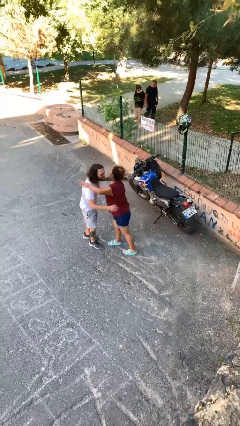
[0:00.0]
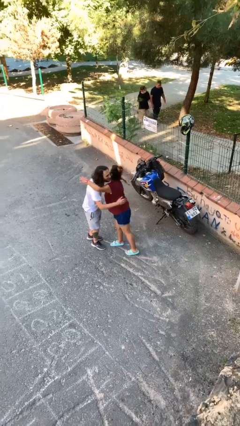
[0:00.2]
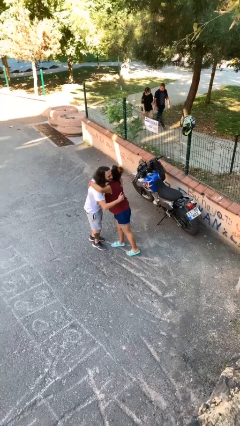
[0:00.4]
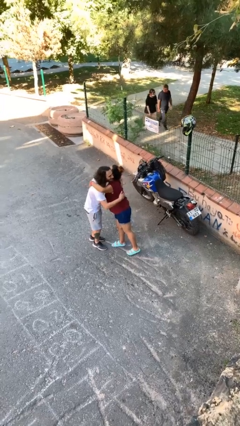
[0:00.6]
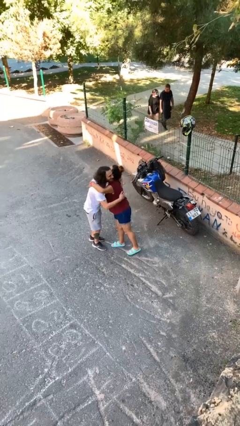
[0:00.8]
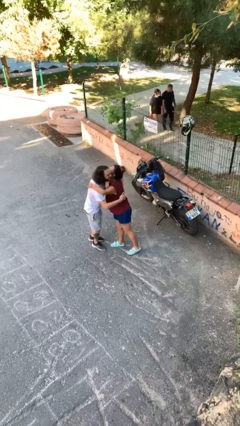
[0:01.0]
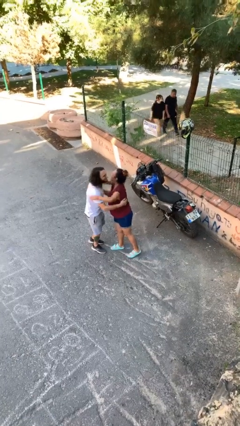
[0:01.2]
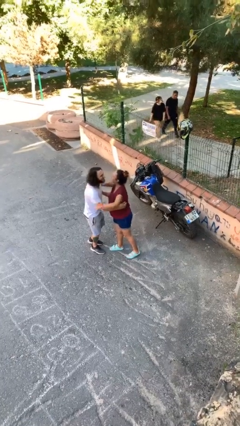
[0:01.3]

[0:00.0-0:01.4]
person embraces person

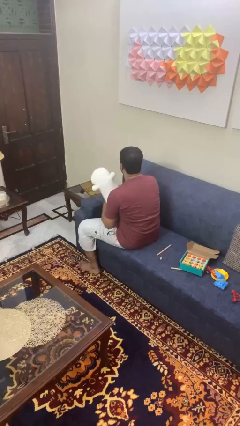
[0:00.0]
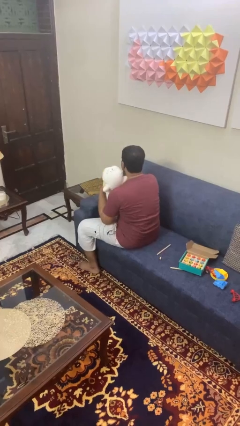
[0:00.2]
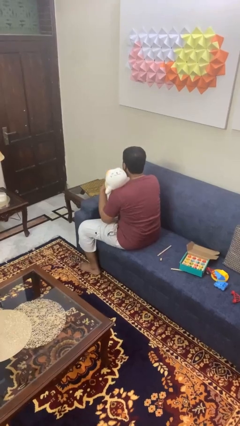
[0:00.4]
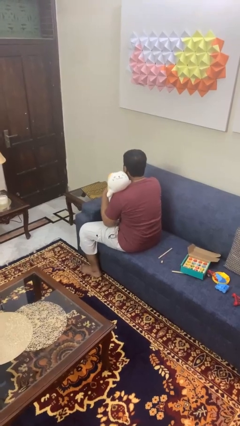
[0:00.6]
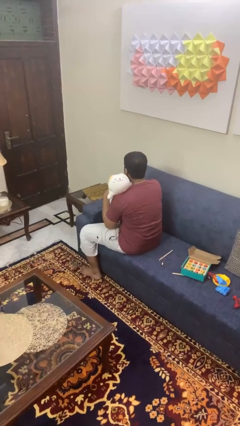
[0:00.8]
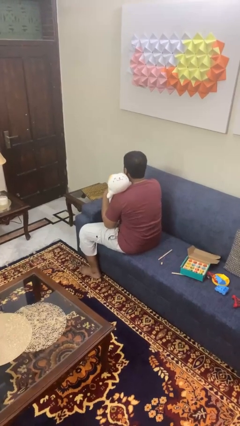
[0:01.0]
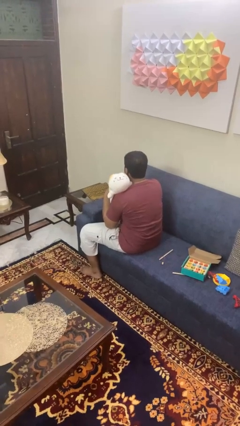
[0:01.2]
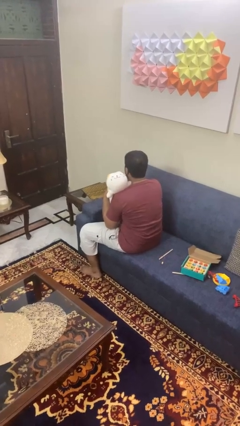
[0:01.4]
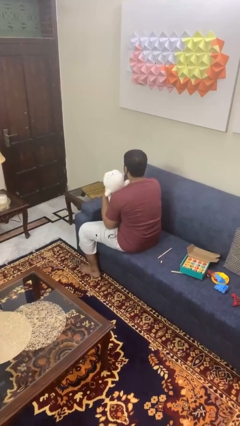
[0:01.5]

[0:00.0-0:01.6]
person hugs stuffed animal

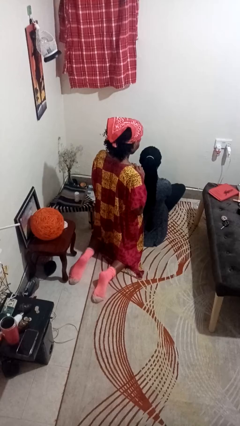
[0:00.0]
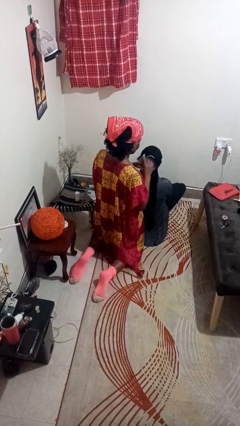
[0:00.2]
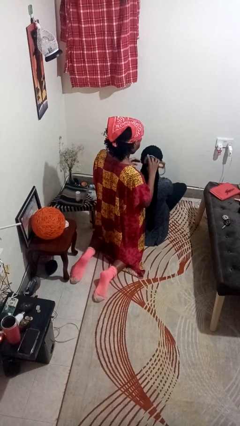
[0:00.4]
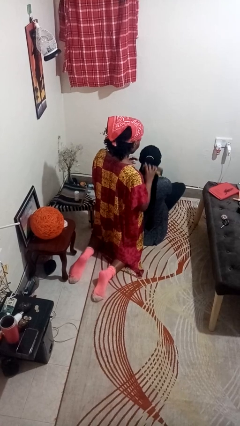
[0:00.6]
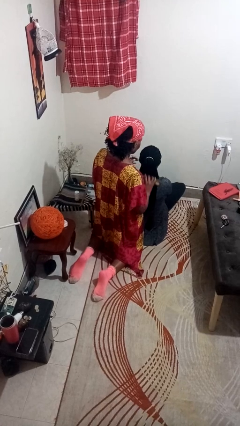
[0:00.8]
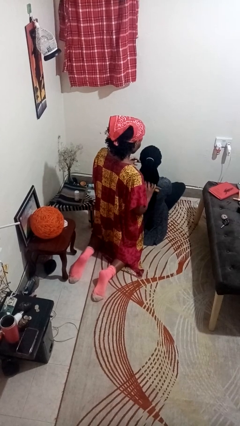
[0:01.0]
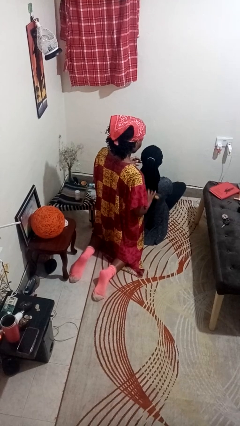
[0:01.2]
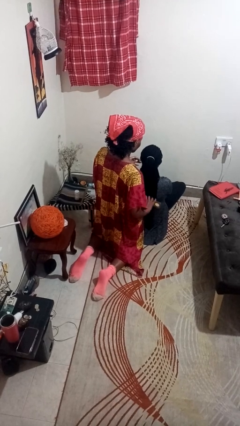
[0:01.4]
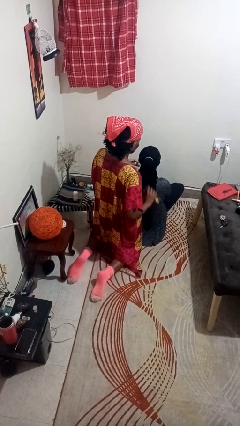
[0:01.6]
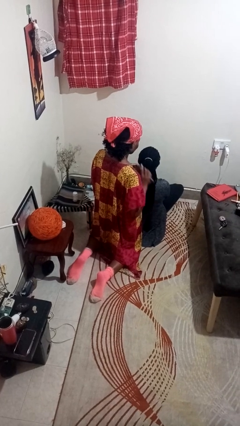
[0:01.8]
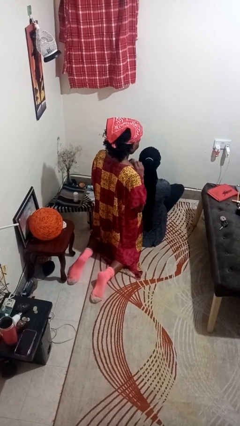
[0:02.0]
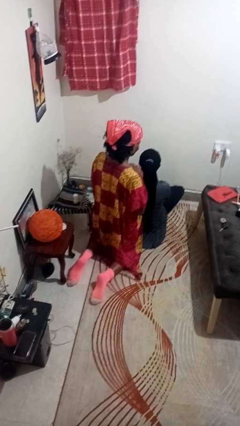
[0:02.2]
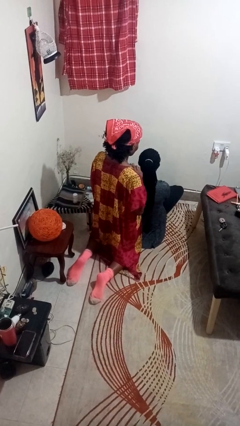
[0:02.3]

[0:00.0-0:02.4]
person brushes hair of person

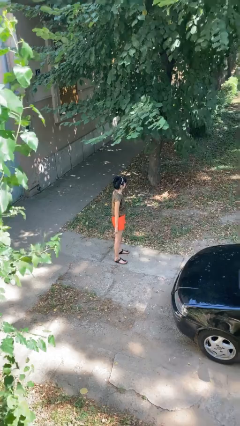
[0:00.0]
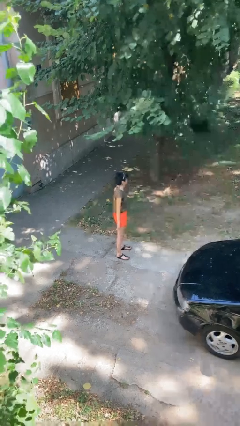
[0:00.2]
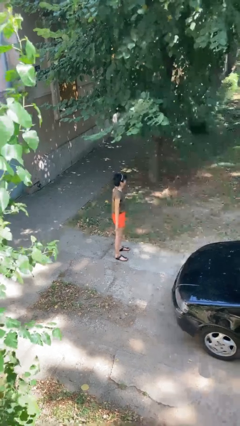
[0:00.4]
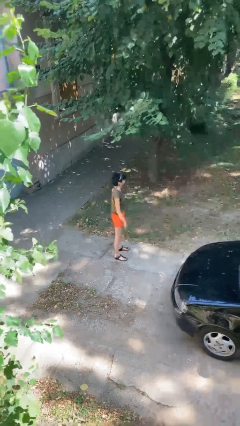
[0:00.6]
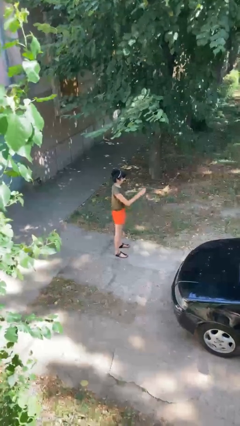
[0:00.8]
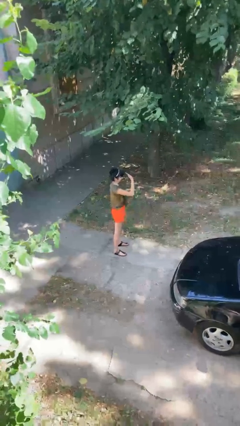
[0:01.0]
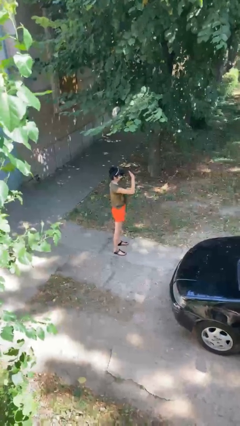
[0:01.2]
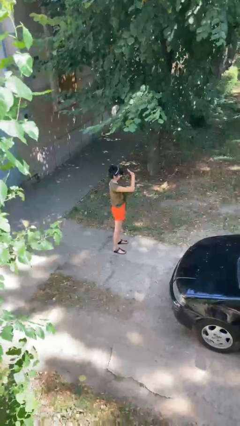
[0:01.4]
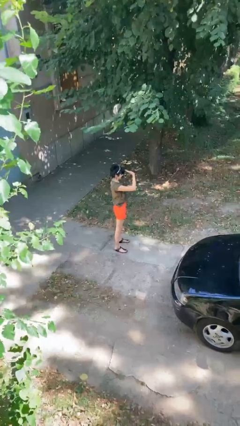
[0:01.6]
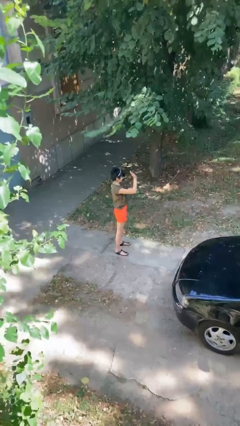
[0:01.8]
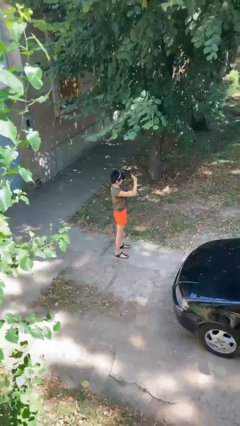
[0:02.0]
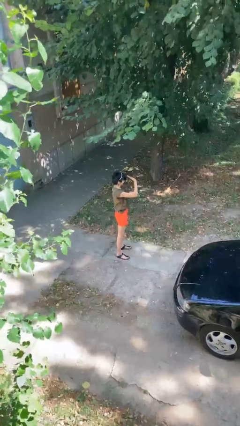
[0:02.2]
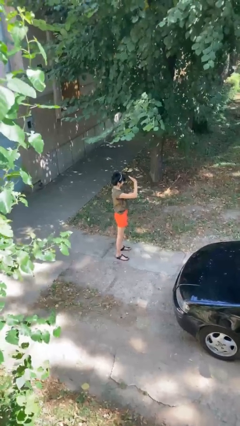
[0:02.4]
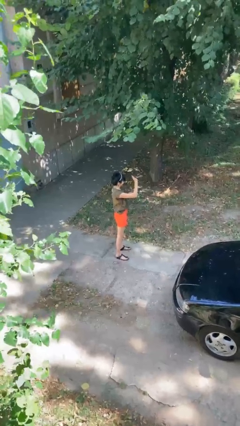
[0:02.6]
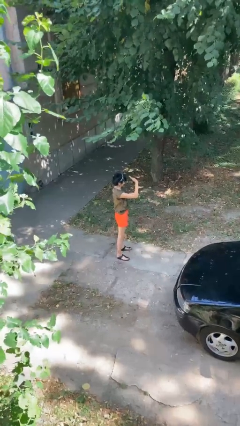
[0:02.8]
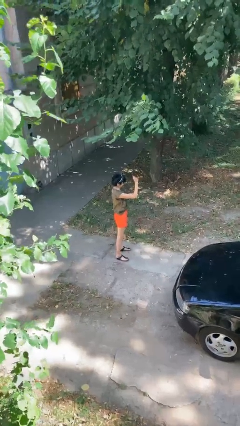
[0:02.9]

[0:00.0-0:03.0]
person waves at person

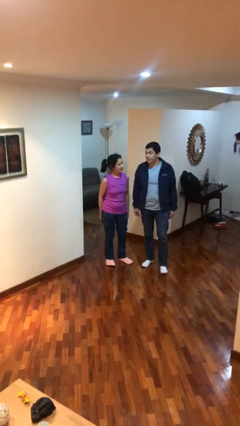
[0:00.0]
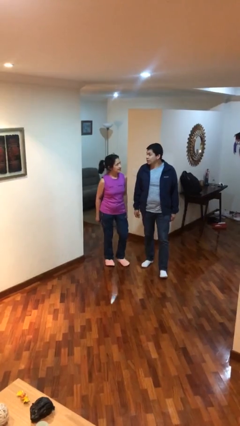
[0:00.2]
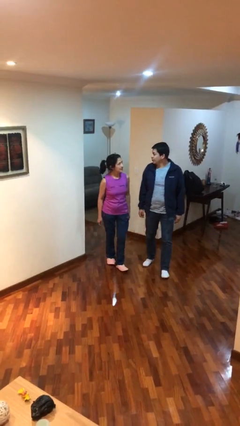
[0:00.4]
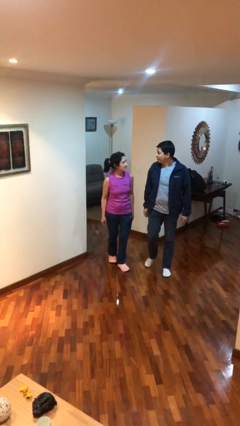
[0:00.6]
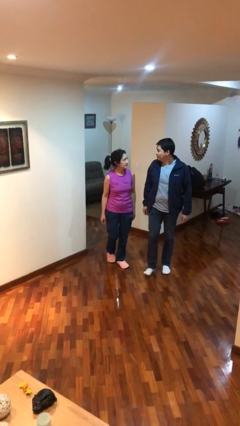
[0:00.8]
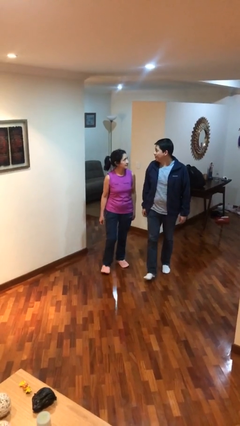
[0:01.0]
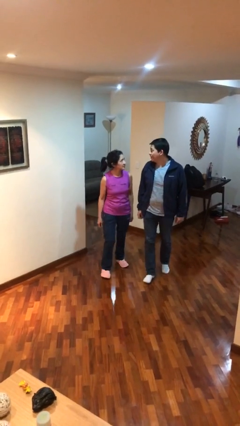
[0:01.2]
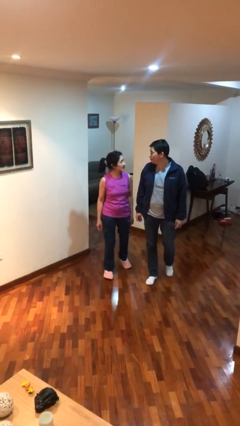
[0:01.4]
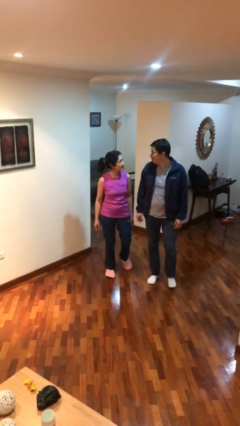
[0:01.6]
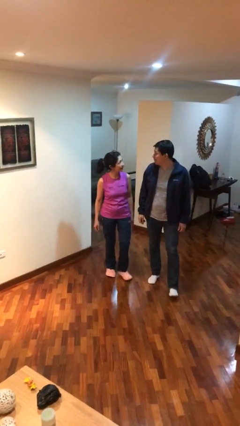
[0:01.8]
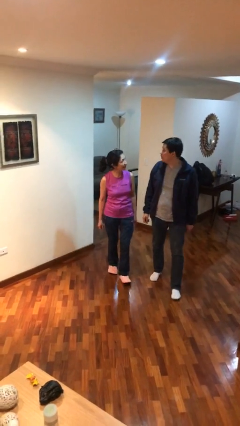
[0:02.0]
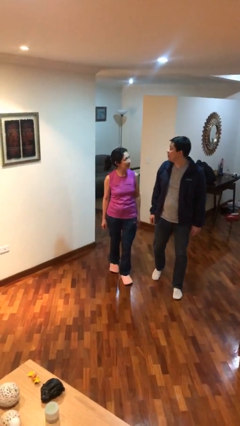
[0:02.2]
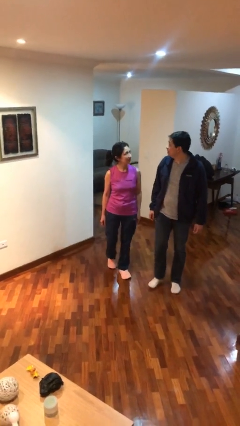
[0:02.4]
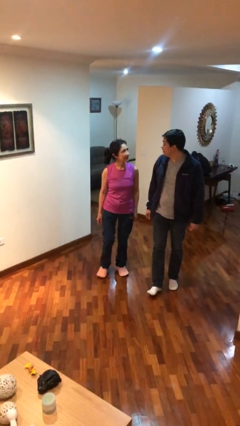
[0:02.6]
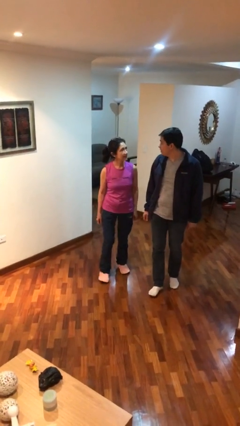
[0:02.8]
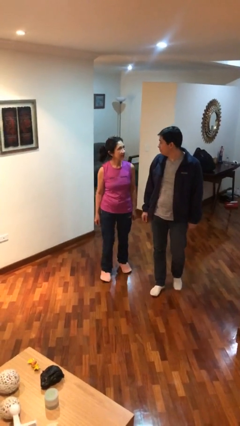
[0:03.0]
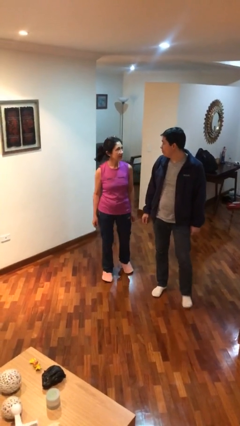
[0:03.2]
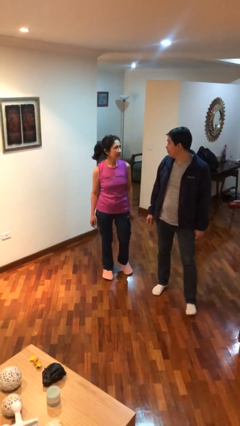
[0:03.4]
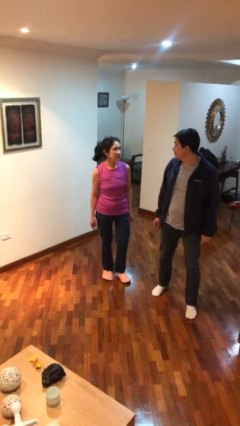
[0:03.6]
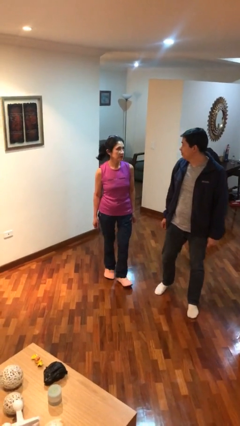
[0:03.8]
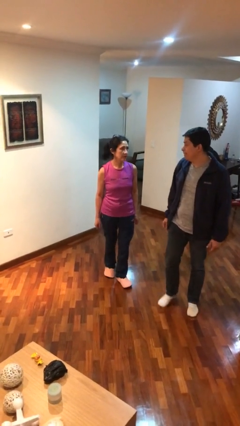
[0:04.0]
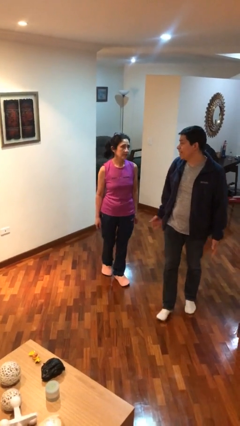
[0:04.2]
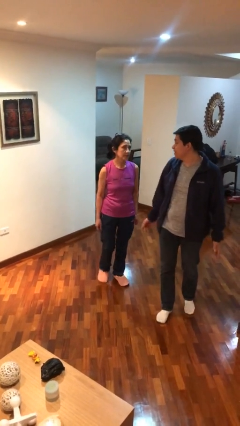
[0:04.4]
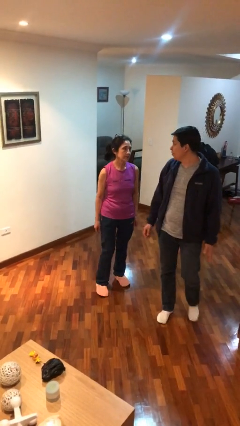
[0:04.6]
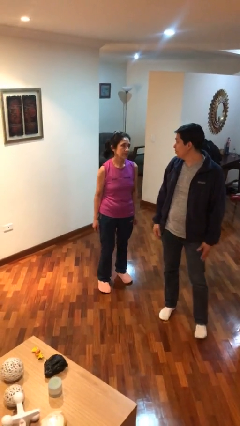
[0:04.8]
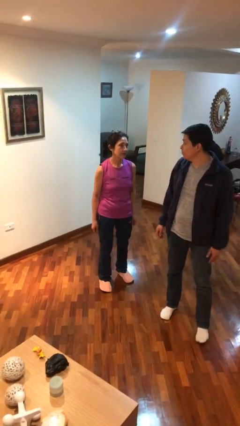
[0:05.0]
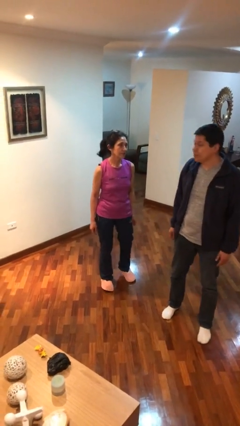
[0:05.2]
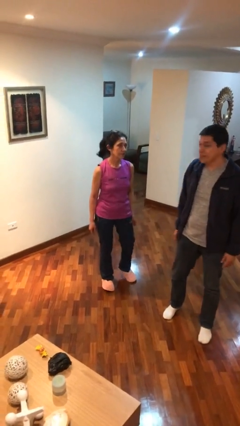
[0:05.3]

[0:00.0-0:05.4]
person talks to person

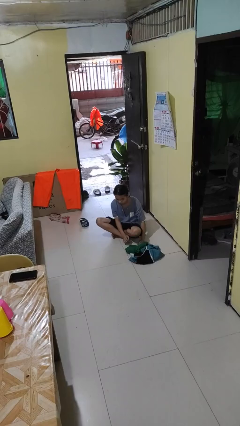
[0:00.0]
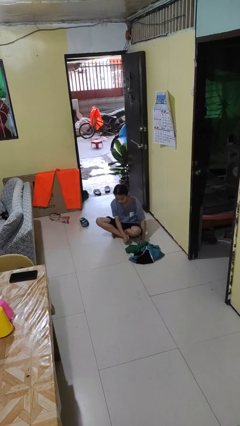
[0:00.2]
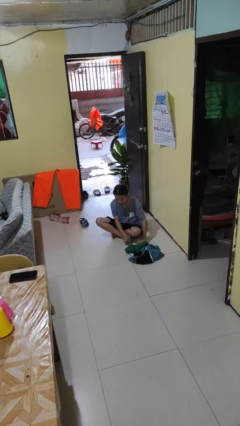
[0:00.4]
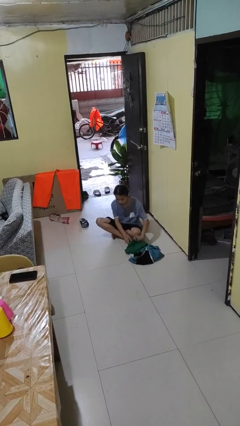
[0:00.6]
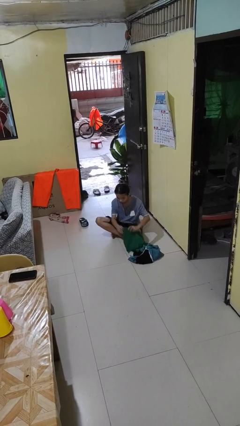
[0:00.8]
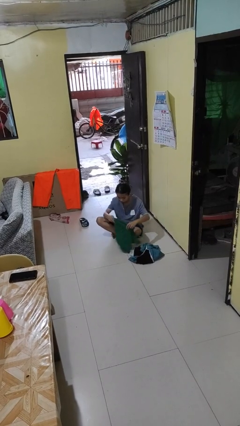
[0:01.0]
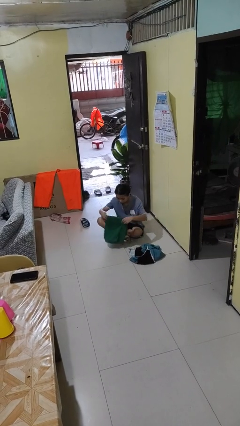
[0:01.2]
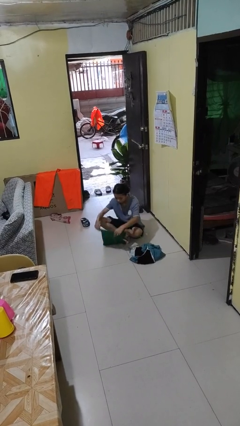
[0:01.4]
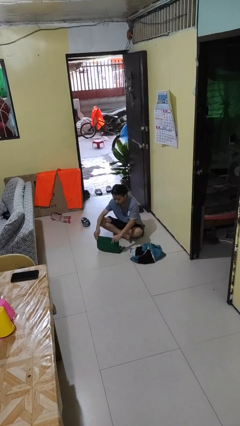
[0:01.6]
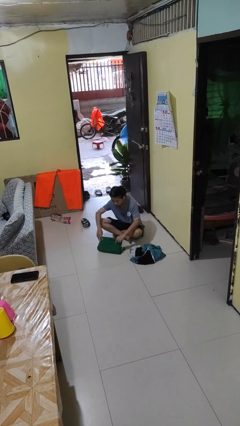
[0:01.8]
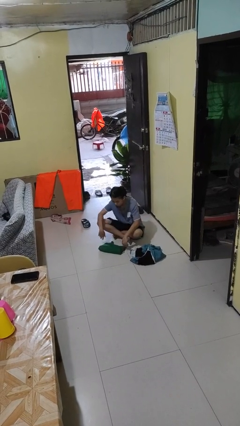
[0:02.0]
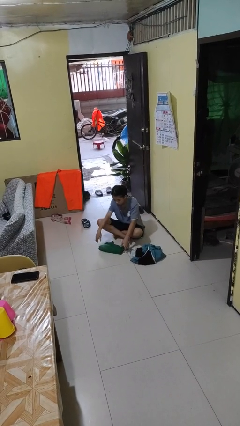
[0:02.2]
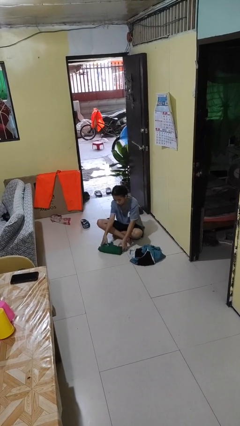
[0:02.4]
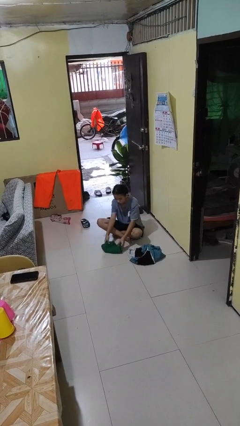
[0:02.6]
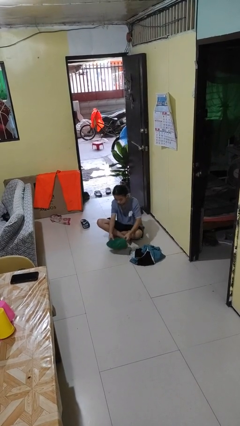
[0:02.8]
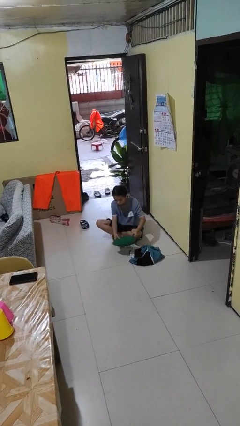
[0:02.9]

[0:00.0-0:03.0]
person folds shirt

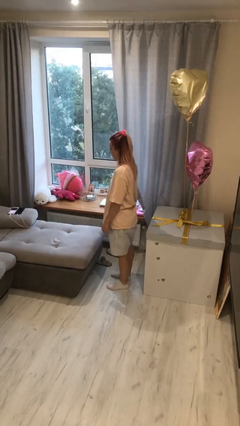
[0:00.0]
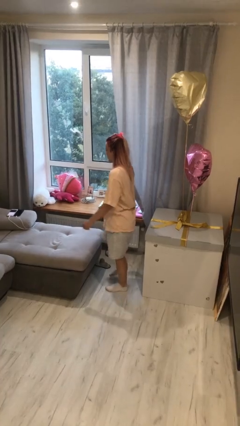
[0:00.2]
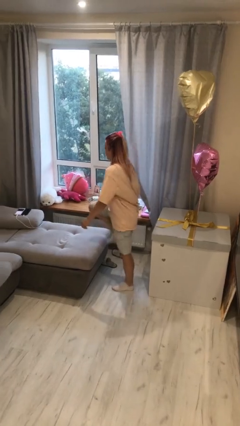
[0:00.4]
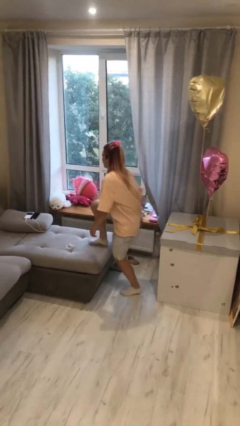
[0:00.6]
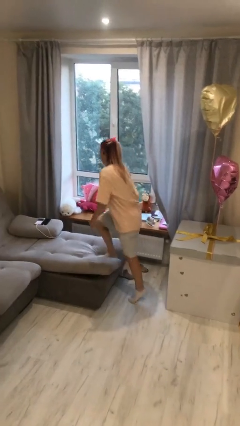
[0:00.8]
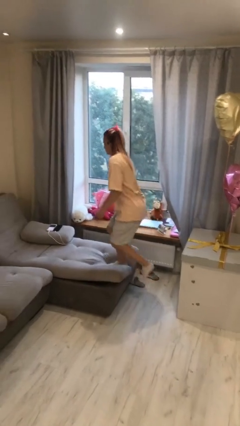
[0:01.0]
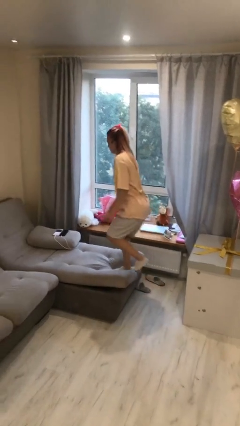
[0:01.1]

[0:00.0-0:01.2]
person climbs on couch
